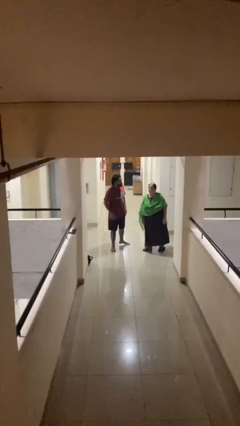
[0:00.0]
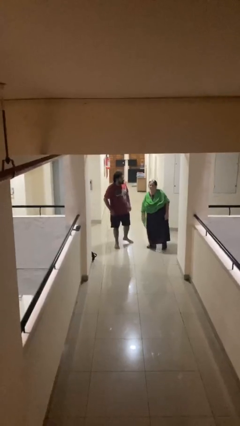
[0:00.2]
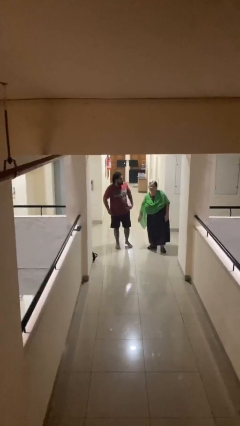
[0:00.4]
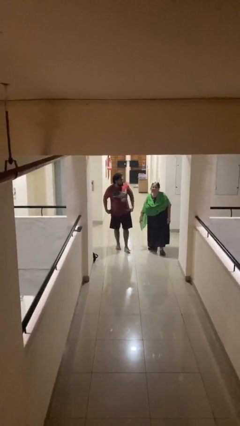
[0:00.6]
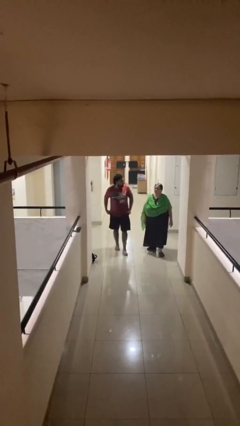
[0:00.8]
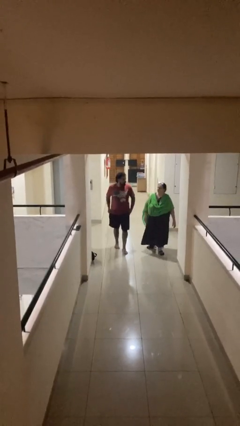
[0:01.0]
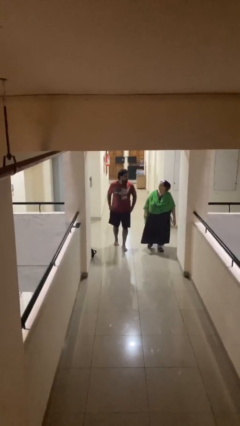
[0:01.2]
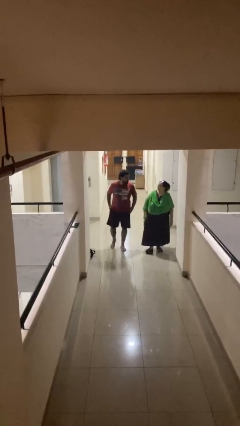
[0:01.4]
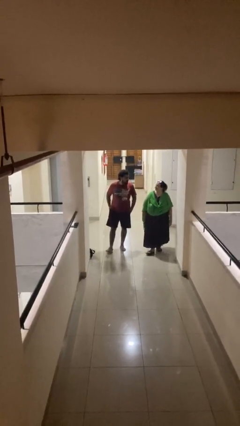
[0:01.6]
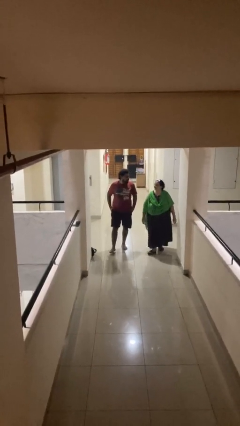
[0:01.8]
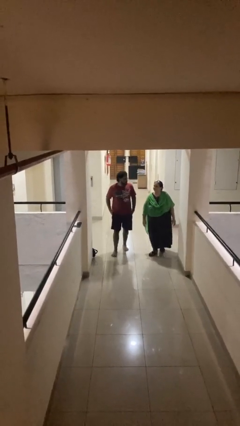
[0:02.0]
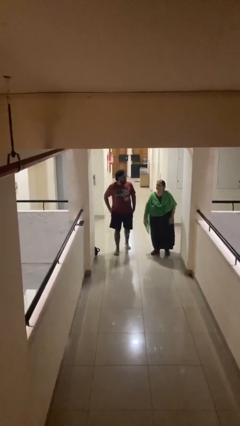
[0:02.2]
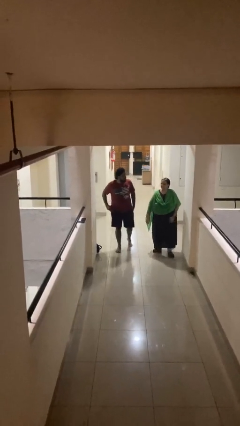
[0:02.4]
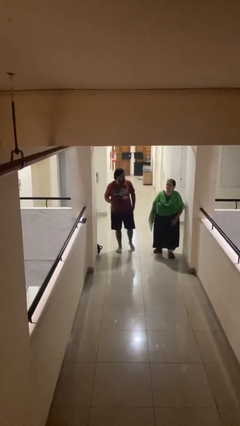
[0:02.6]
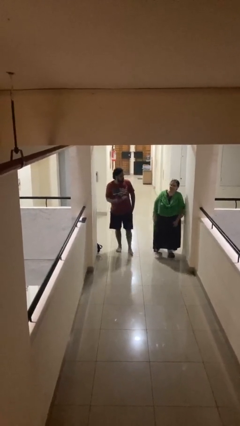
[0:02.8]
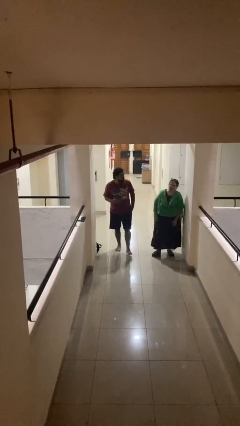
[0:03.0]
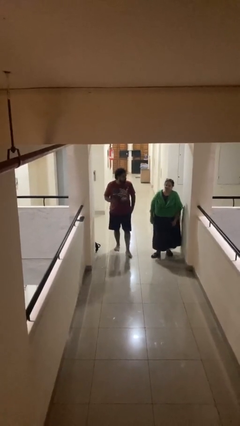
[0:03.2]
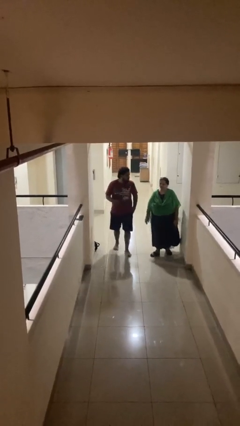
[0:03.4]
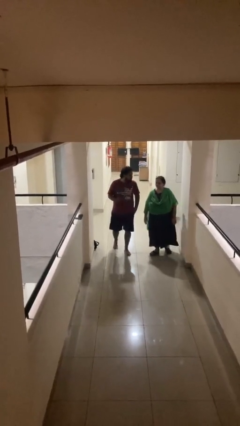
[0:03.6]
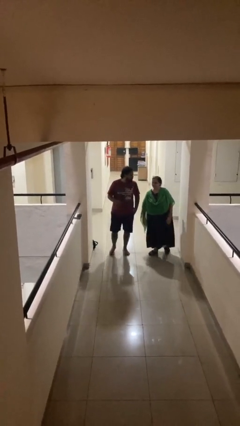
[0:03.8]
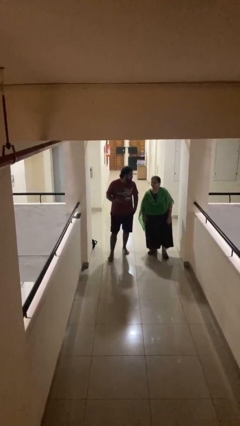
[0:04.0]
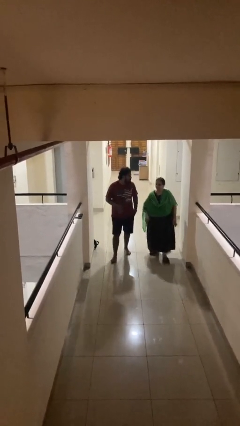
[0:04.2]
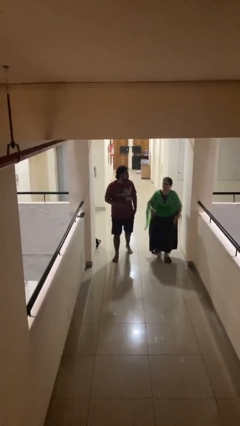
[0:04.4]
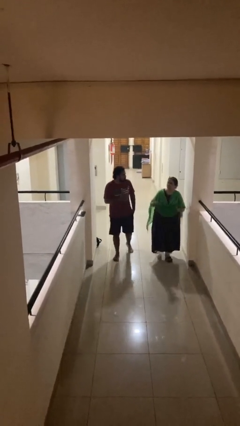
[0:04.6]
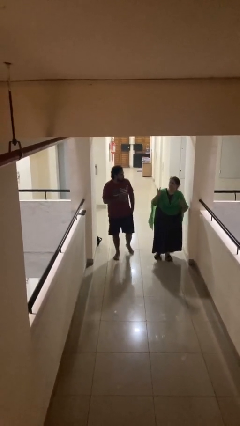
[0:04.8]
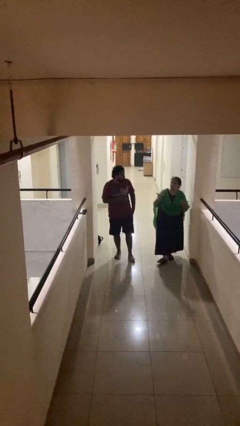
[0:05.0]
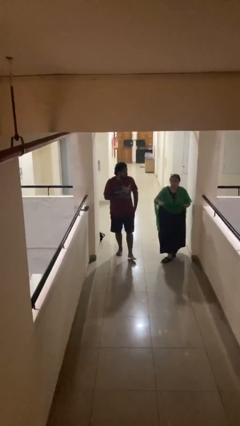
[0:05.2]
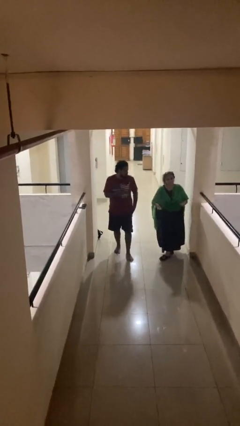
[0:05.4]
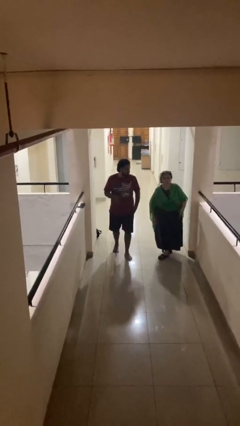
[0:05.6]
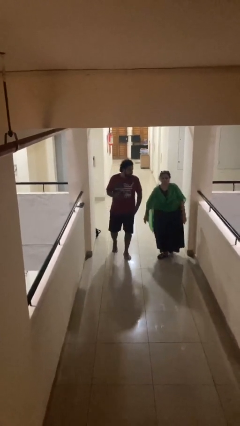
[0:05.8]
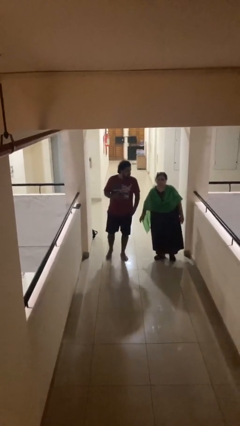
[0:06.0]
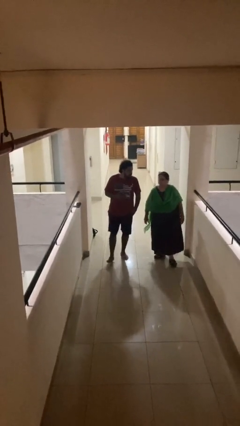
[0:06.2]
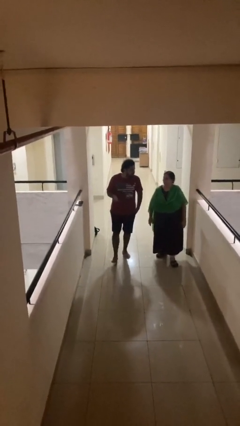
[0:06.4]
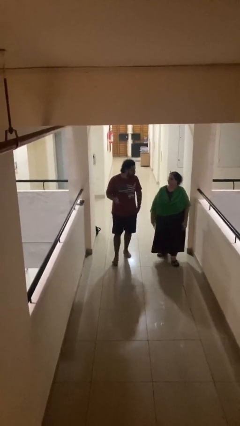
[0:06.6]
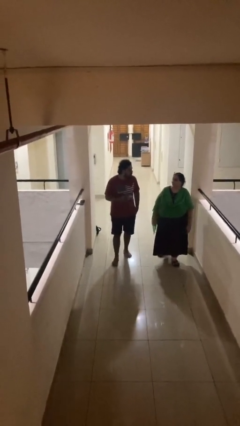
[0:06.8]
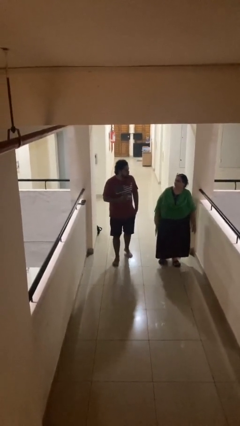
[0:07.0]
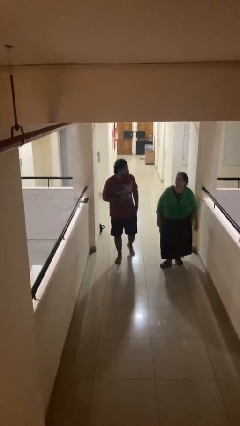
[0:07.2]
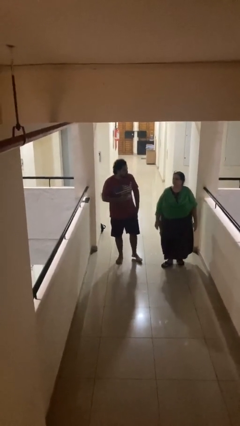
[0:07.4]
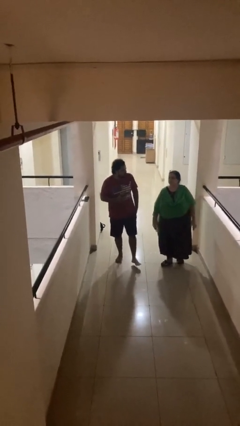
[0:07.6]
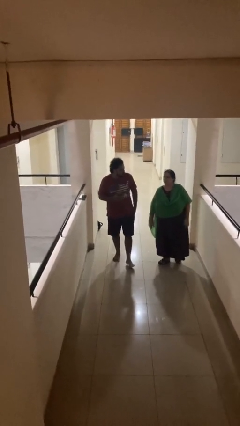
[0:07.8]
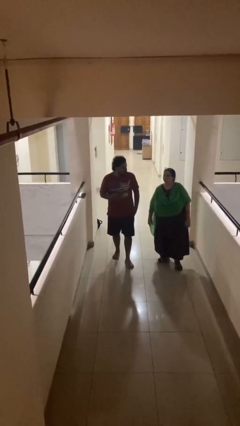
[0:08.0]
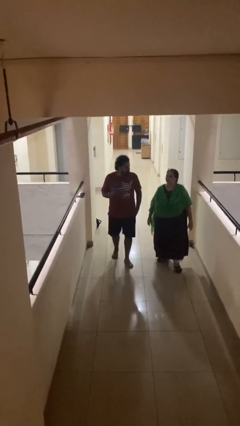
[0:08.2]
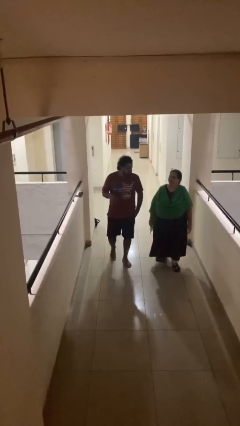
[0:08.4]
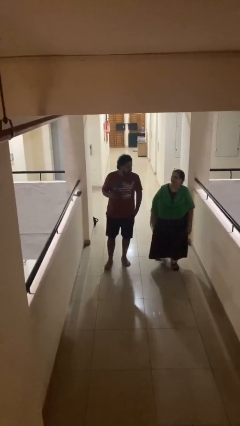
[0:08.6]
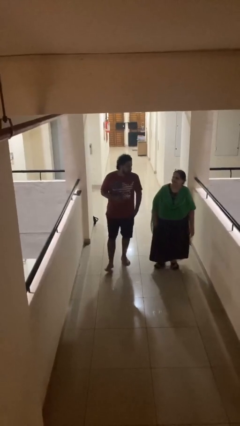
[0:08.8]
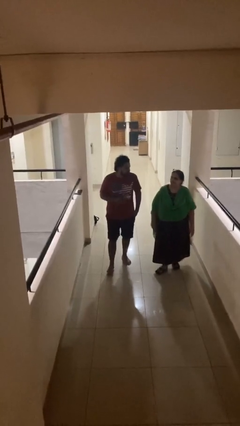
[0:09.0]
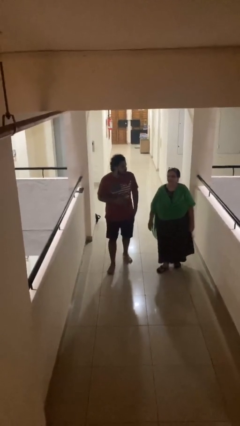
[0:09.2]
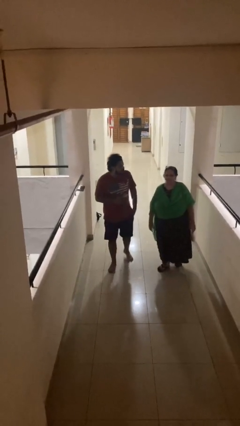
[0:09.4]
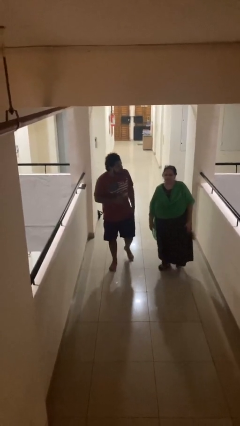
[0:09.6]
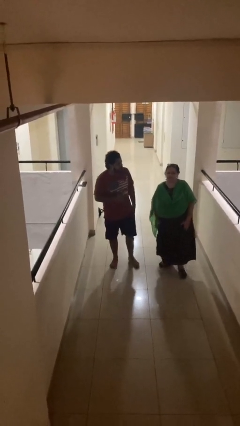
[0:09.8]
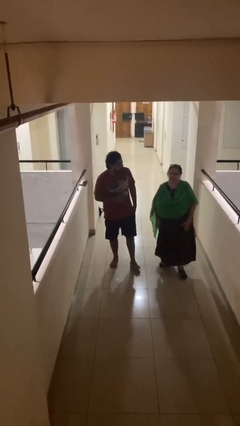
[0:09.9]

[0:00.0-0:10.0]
person talks to person

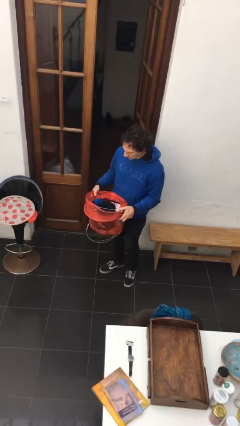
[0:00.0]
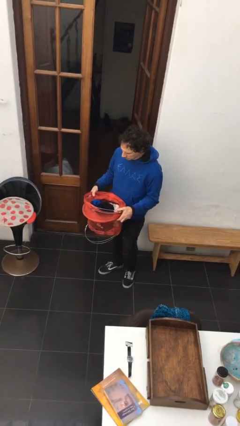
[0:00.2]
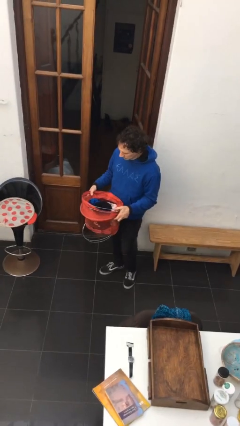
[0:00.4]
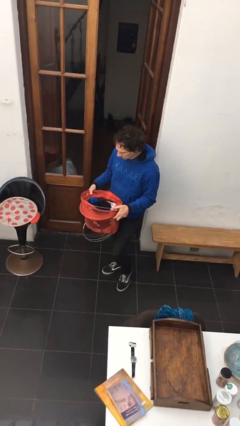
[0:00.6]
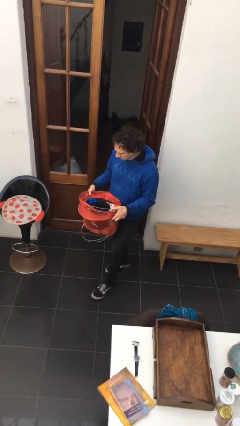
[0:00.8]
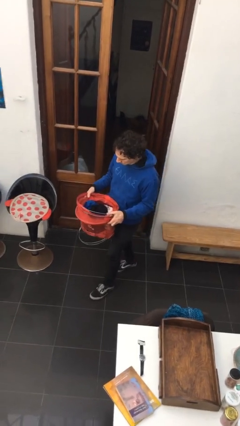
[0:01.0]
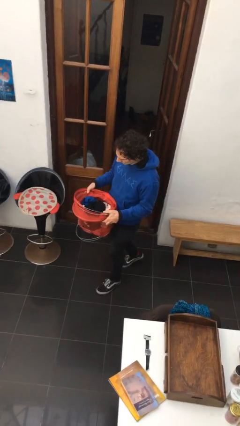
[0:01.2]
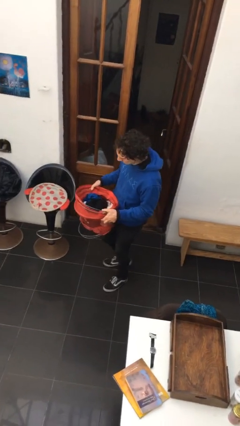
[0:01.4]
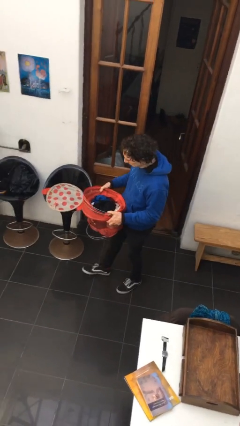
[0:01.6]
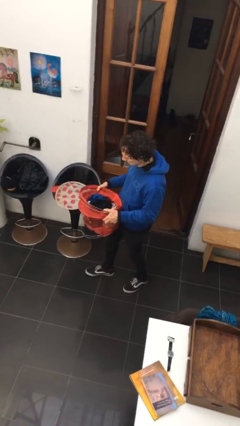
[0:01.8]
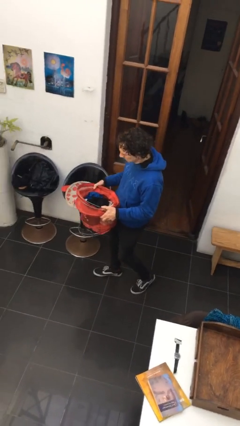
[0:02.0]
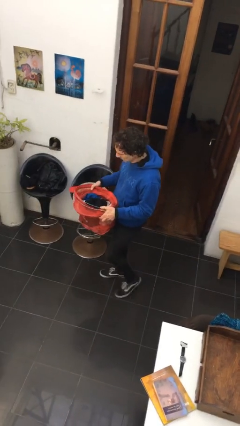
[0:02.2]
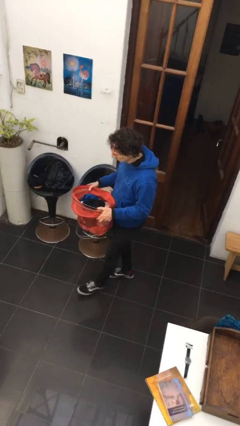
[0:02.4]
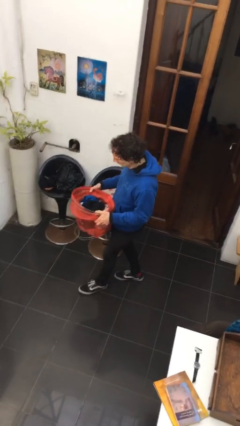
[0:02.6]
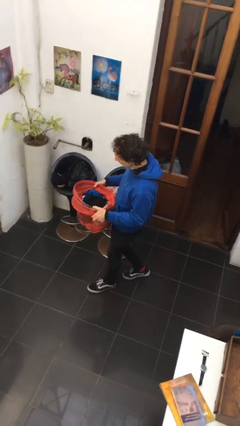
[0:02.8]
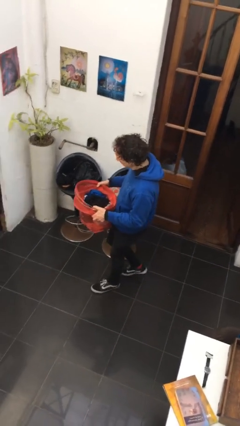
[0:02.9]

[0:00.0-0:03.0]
person carries laundry basket

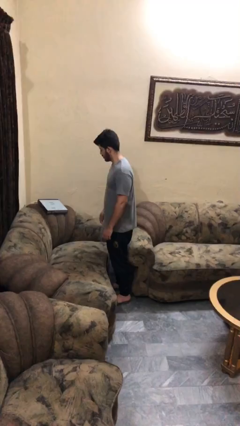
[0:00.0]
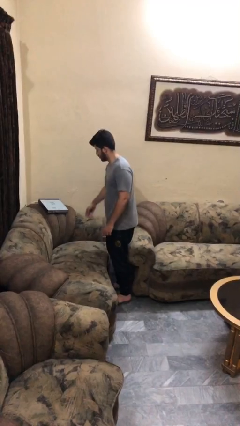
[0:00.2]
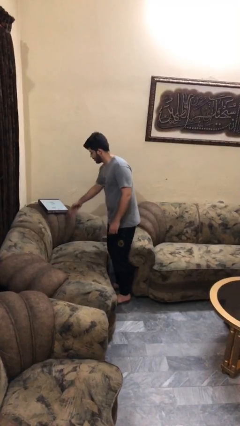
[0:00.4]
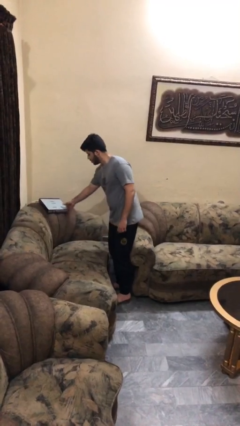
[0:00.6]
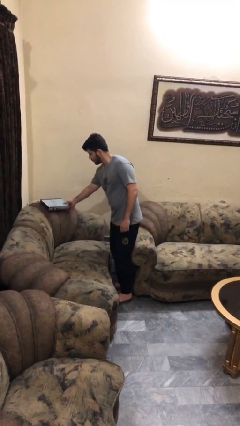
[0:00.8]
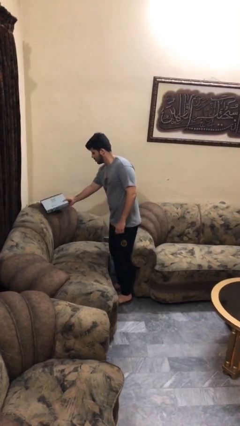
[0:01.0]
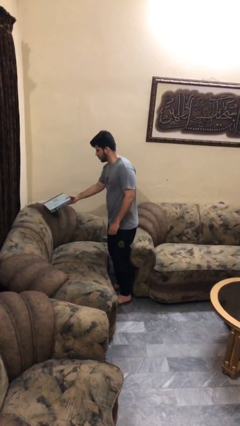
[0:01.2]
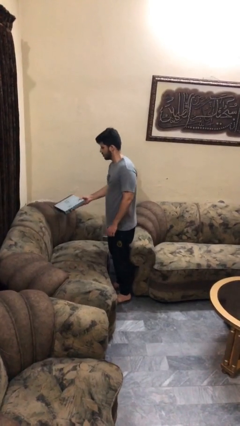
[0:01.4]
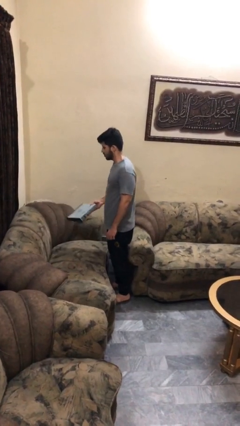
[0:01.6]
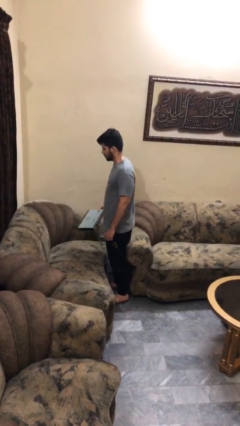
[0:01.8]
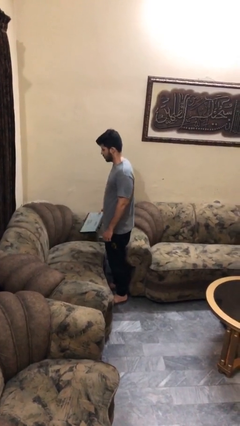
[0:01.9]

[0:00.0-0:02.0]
person picks up object from couch

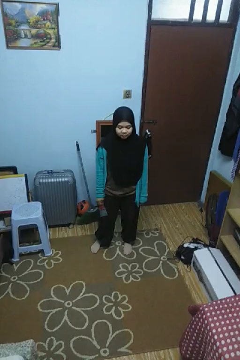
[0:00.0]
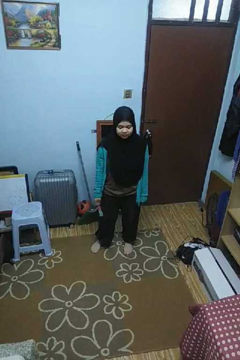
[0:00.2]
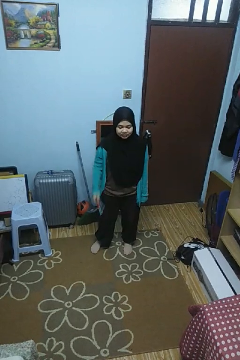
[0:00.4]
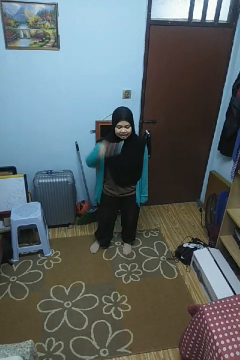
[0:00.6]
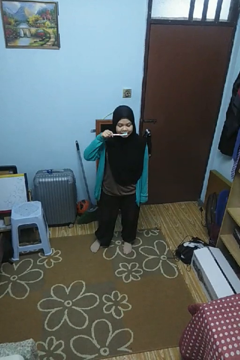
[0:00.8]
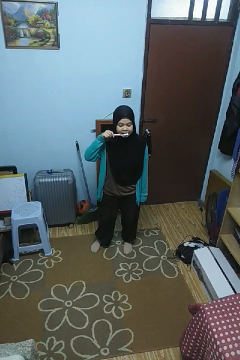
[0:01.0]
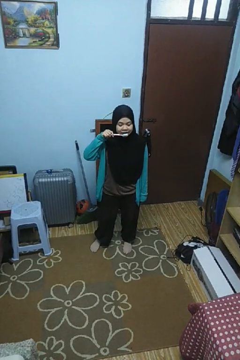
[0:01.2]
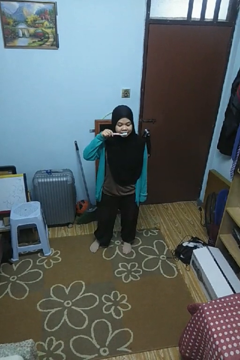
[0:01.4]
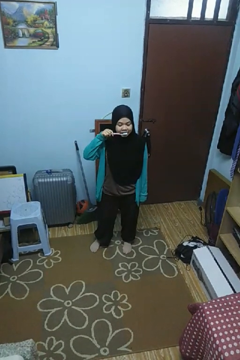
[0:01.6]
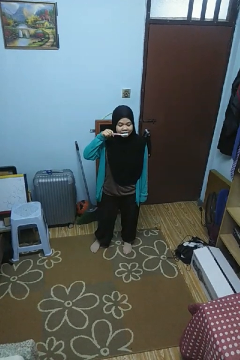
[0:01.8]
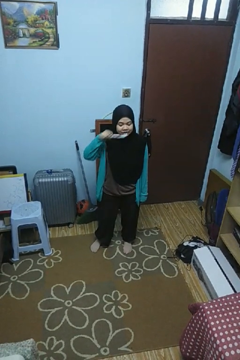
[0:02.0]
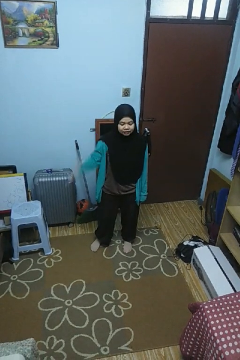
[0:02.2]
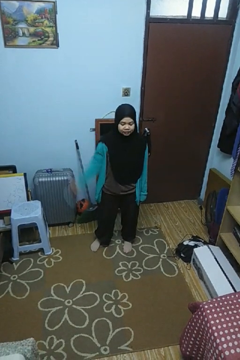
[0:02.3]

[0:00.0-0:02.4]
person brushes teeth

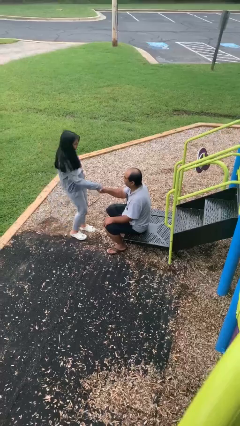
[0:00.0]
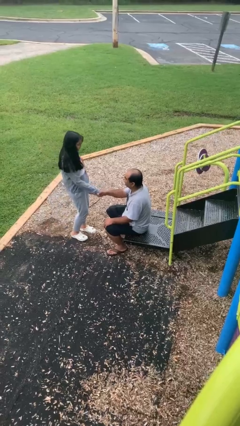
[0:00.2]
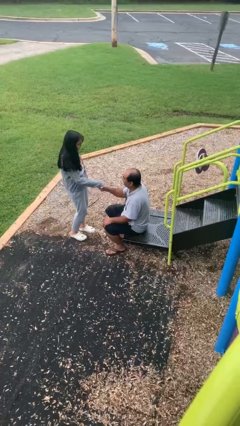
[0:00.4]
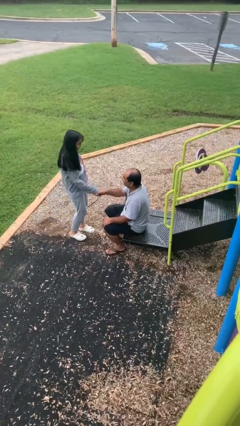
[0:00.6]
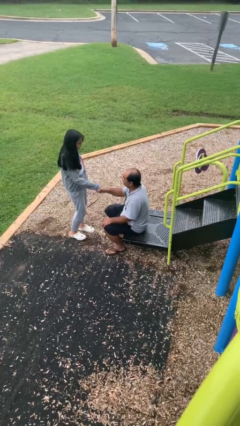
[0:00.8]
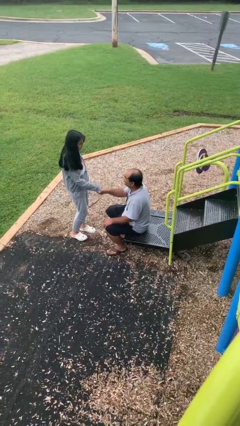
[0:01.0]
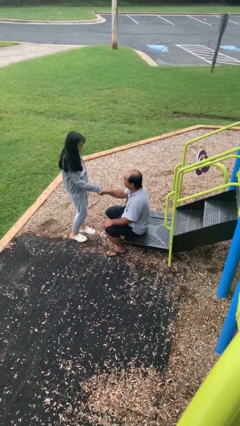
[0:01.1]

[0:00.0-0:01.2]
person shakes hand
